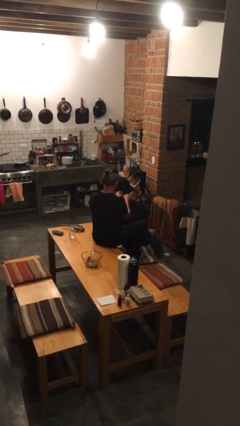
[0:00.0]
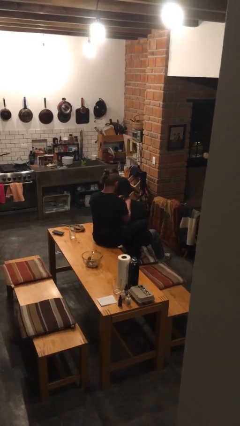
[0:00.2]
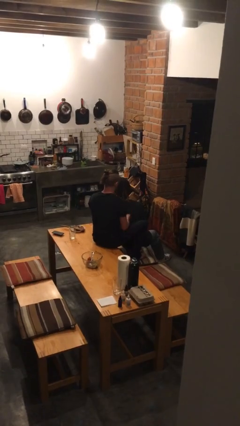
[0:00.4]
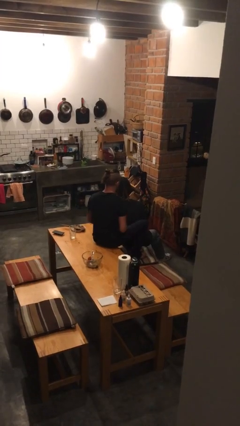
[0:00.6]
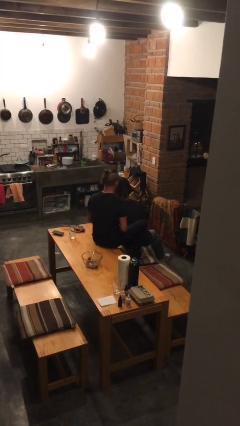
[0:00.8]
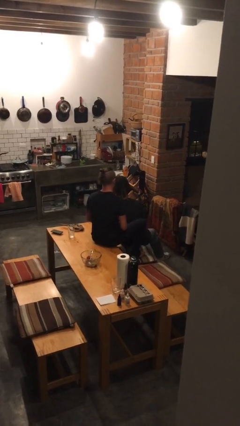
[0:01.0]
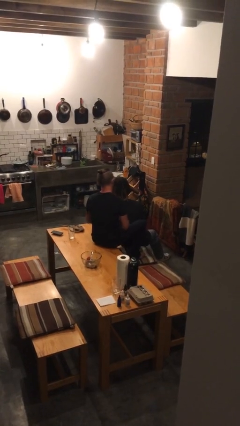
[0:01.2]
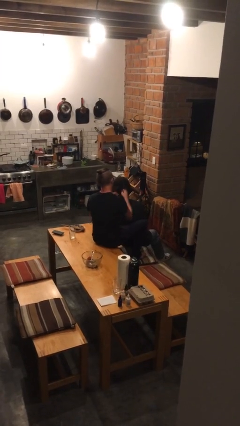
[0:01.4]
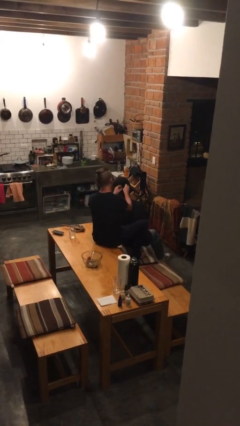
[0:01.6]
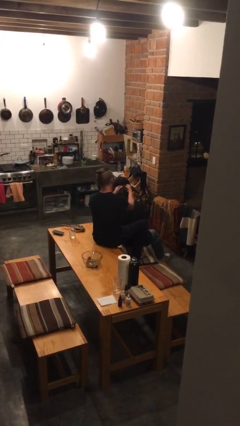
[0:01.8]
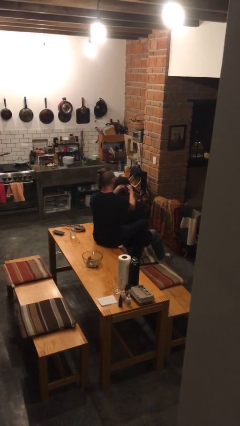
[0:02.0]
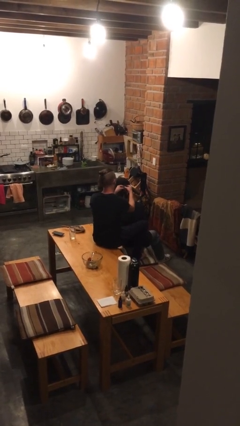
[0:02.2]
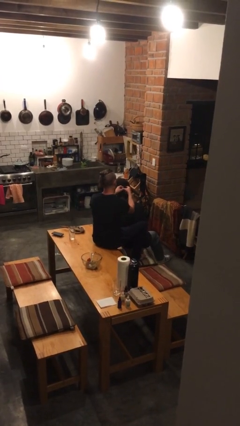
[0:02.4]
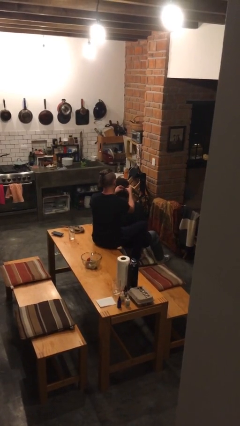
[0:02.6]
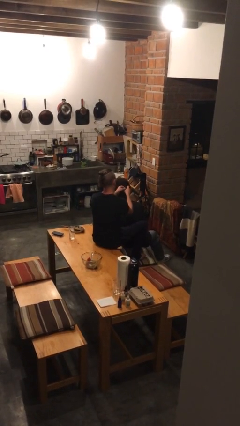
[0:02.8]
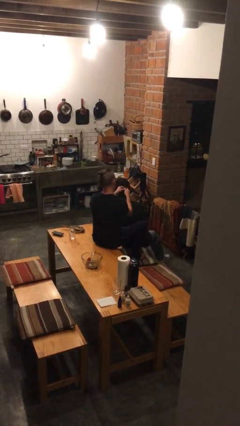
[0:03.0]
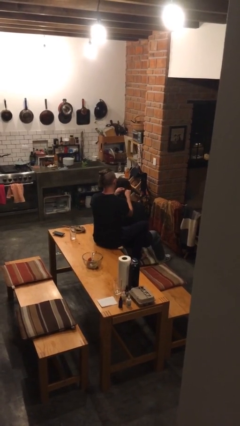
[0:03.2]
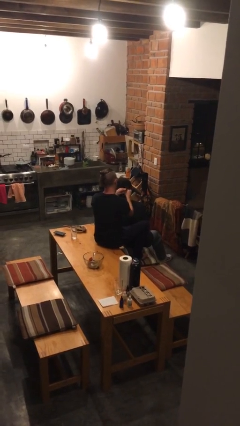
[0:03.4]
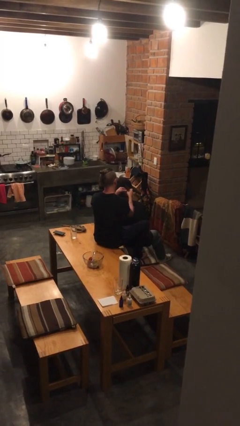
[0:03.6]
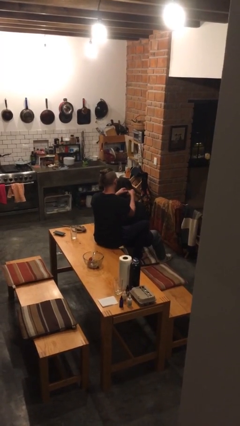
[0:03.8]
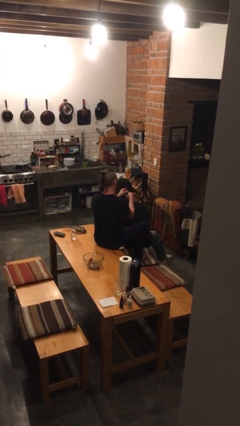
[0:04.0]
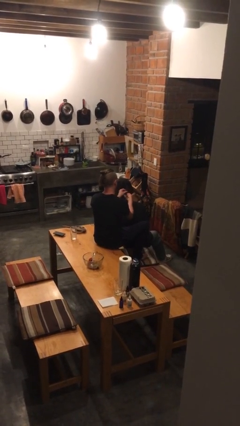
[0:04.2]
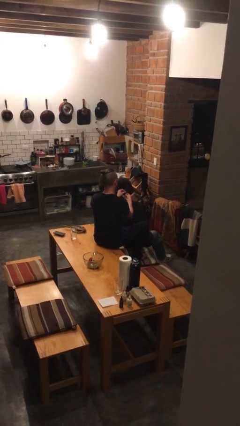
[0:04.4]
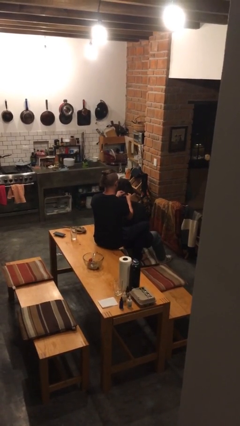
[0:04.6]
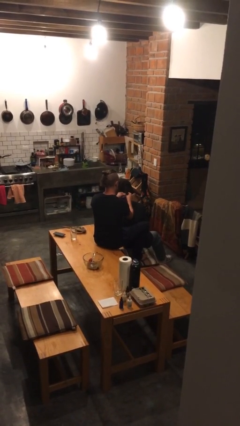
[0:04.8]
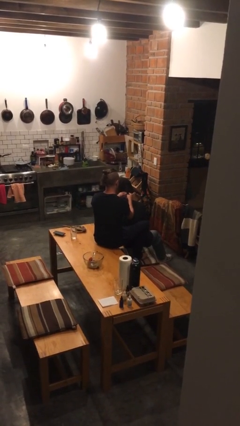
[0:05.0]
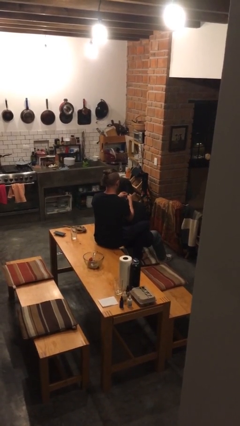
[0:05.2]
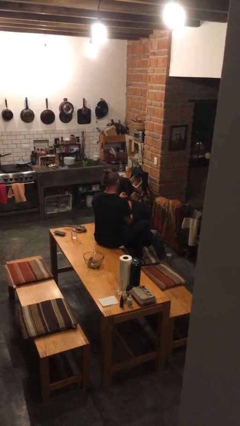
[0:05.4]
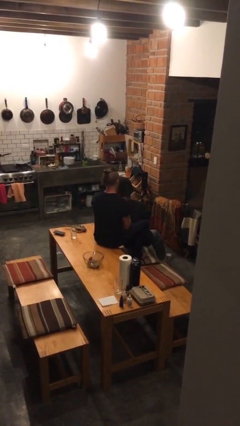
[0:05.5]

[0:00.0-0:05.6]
person braids hair of person

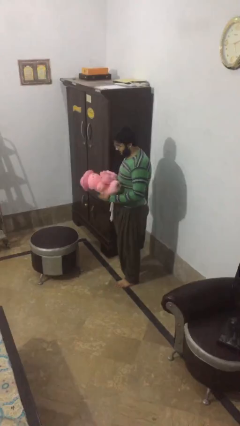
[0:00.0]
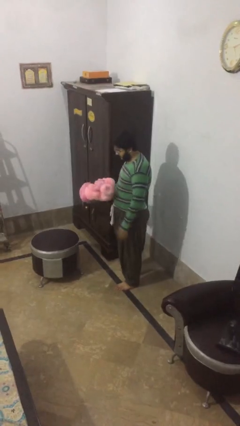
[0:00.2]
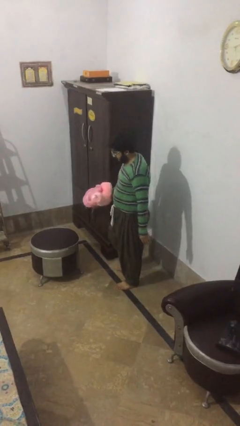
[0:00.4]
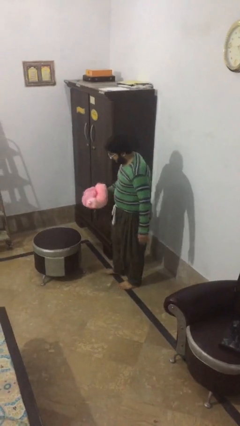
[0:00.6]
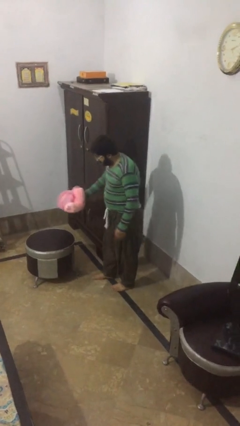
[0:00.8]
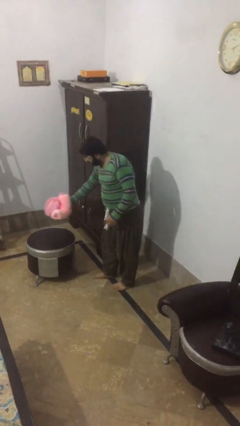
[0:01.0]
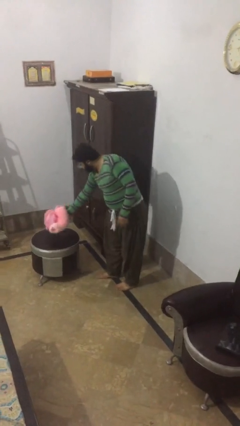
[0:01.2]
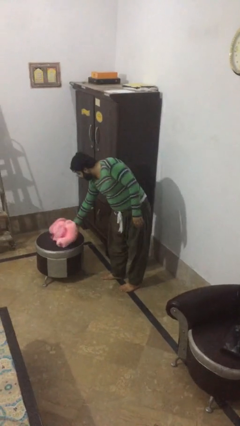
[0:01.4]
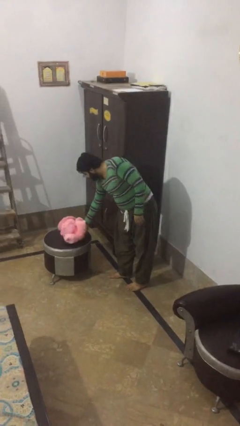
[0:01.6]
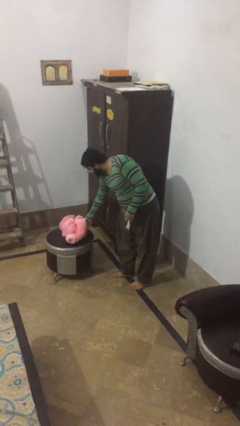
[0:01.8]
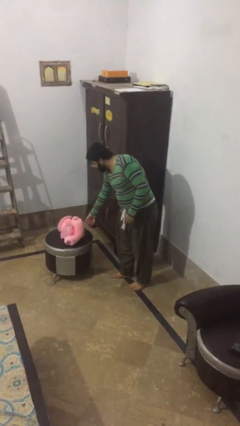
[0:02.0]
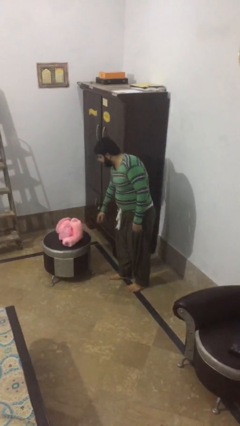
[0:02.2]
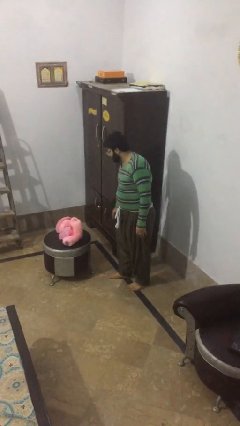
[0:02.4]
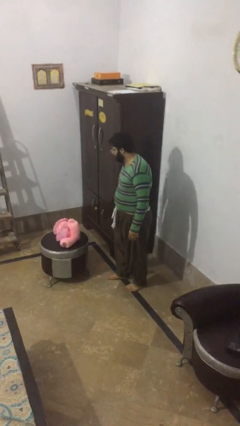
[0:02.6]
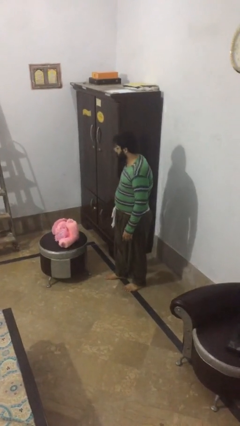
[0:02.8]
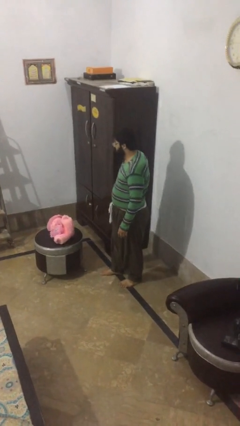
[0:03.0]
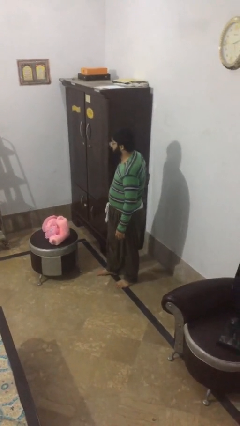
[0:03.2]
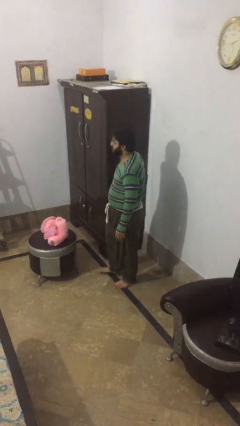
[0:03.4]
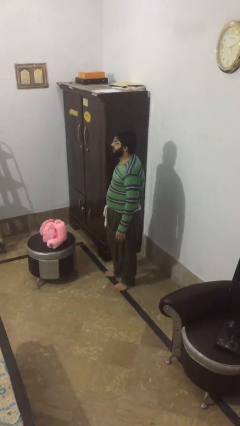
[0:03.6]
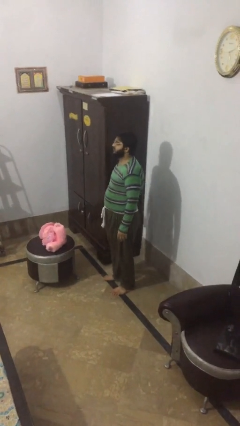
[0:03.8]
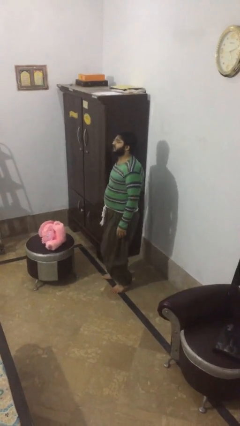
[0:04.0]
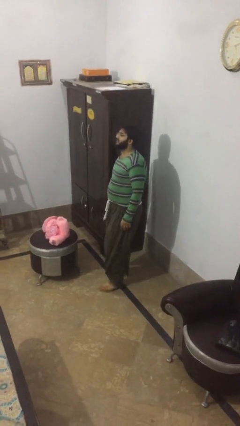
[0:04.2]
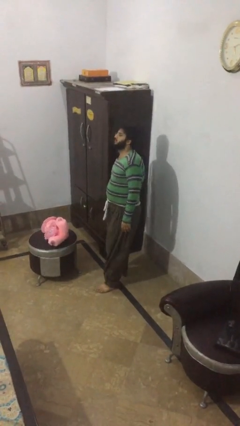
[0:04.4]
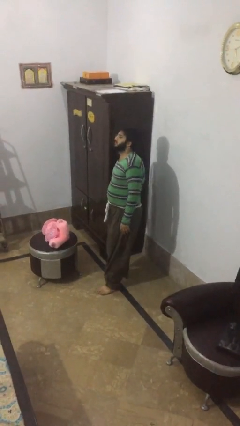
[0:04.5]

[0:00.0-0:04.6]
person puts down object on table

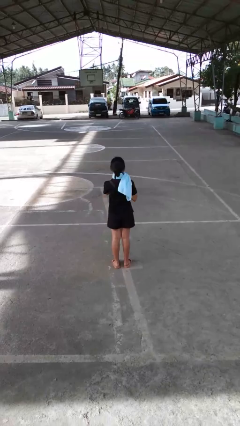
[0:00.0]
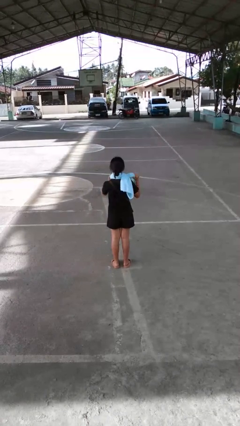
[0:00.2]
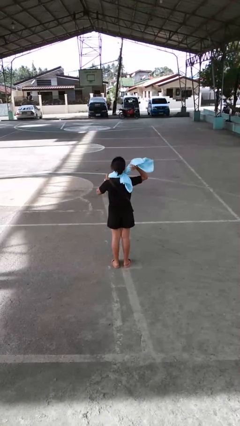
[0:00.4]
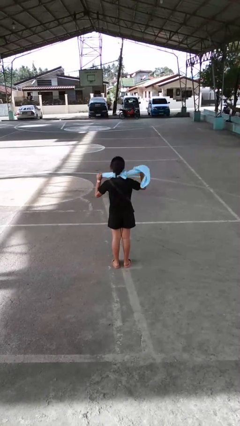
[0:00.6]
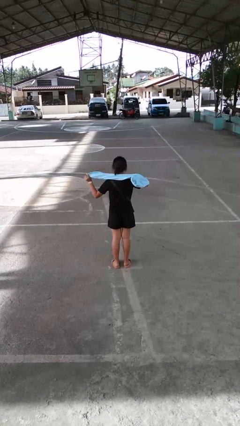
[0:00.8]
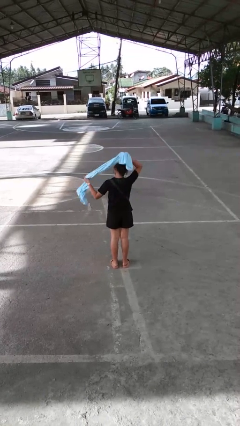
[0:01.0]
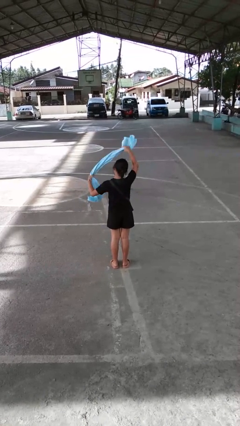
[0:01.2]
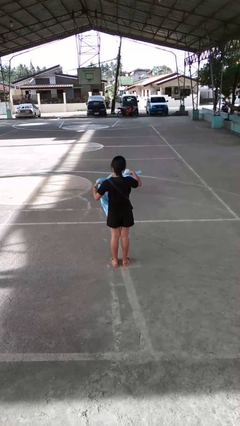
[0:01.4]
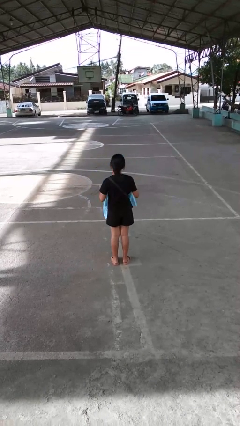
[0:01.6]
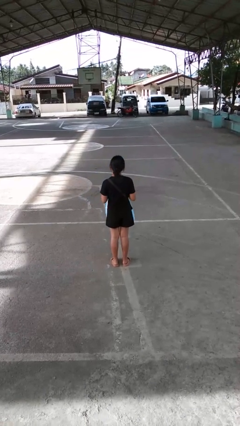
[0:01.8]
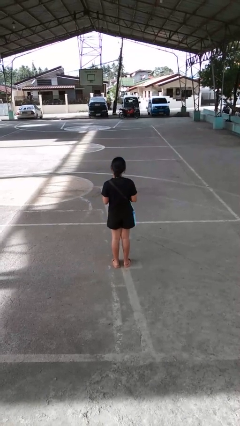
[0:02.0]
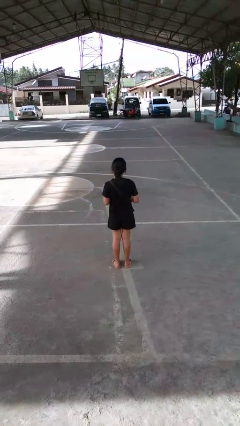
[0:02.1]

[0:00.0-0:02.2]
person takes off scarf

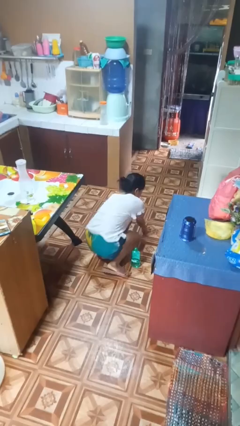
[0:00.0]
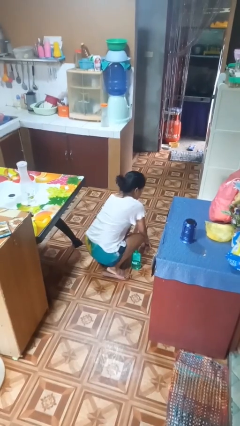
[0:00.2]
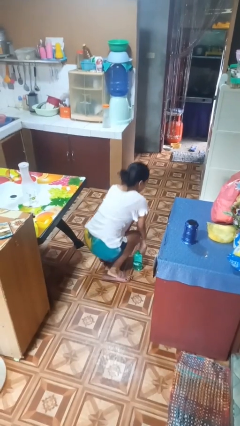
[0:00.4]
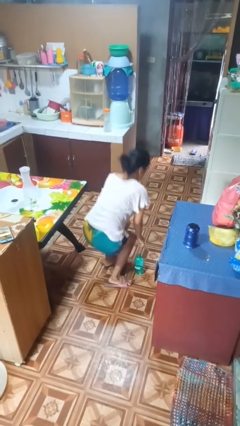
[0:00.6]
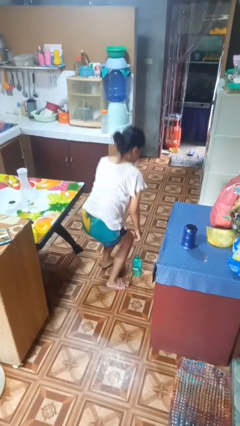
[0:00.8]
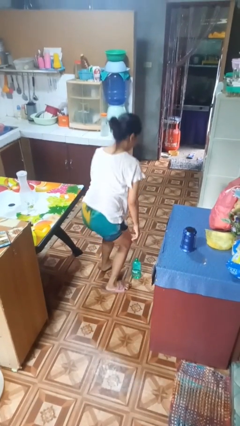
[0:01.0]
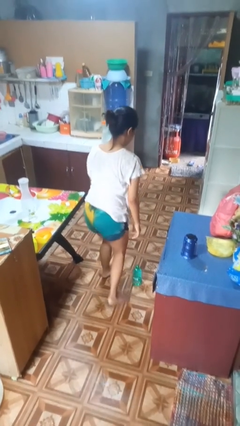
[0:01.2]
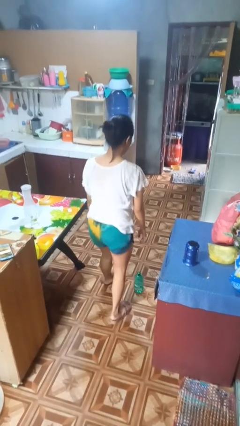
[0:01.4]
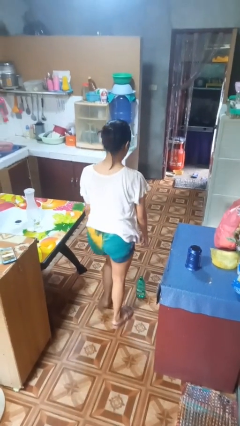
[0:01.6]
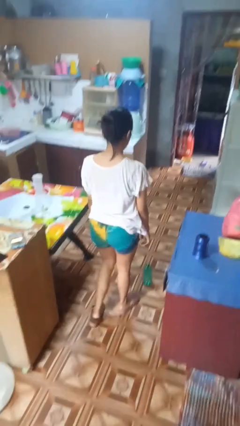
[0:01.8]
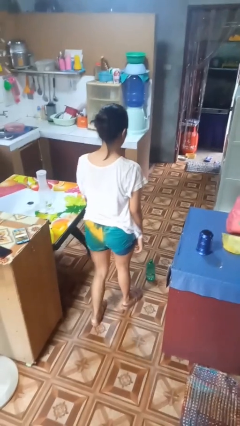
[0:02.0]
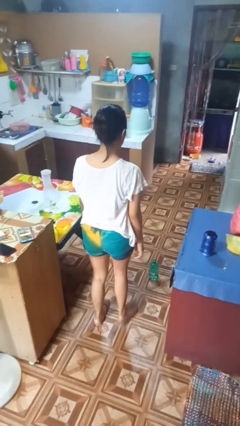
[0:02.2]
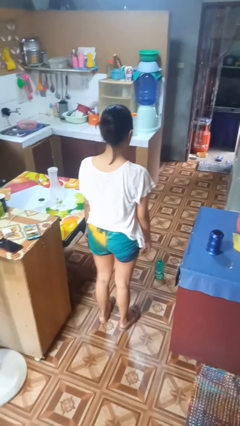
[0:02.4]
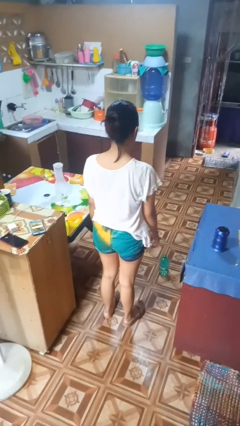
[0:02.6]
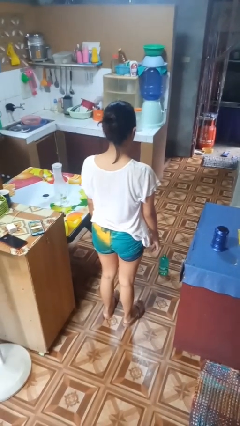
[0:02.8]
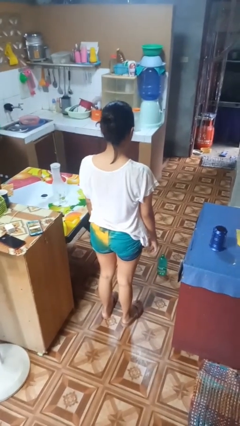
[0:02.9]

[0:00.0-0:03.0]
person stands up from floor

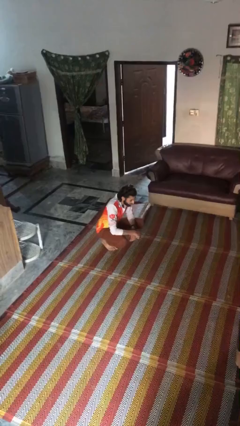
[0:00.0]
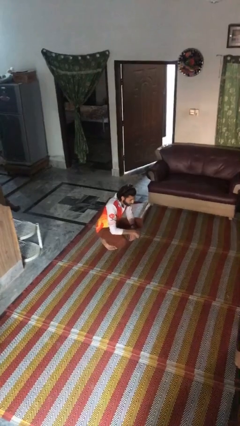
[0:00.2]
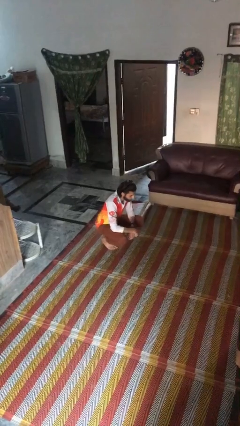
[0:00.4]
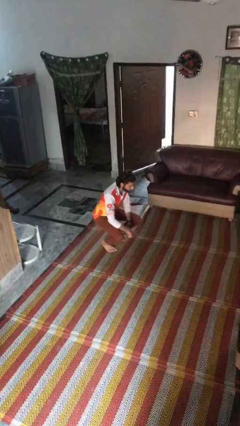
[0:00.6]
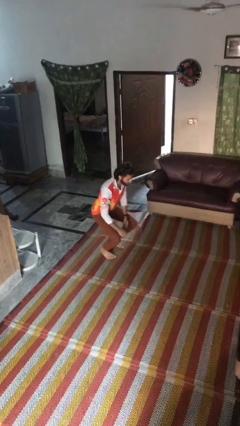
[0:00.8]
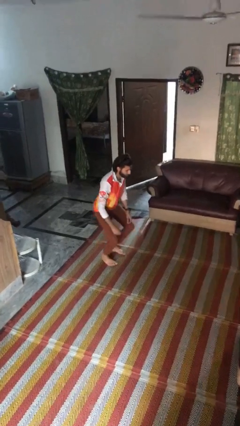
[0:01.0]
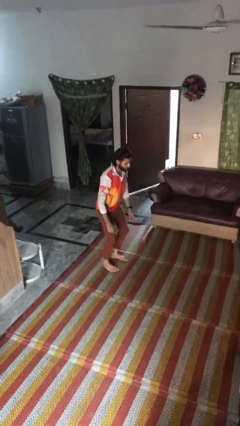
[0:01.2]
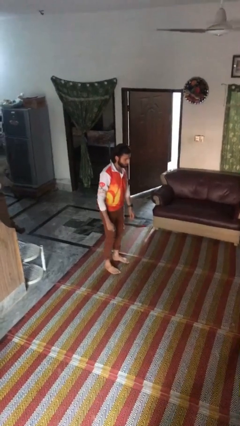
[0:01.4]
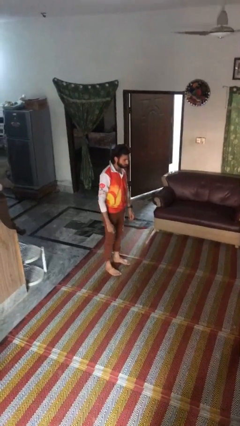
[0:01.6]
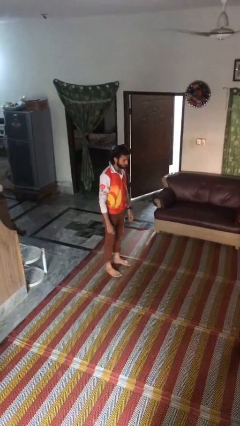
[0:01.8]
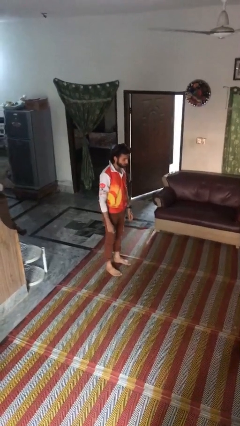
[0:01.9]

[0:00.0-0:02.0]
person stands up
